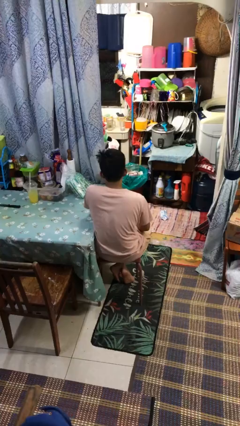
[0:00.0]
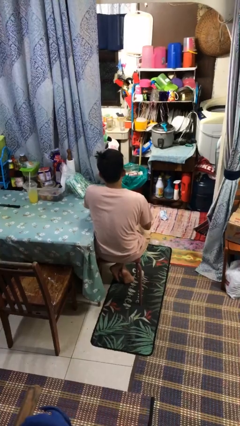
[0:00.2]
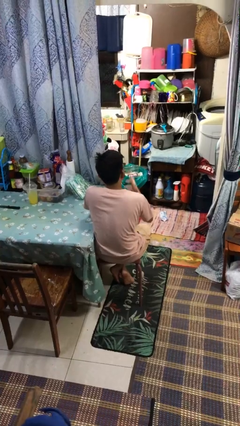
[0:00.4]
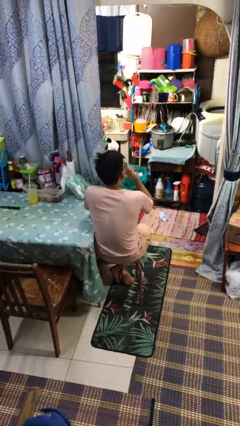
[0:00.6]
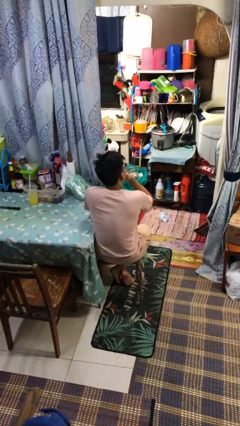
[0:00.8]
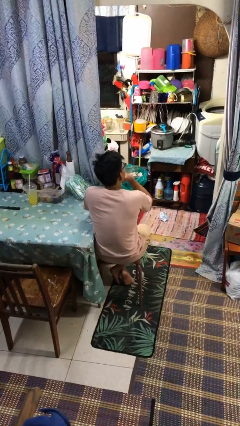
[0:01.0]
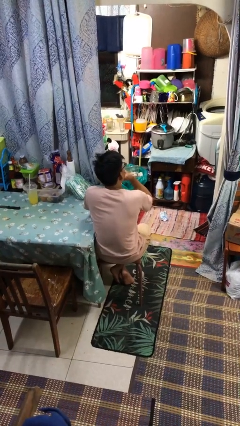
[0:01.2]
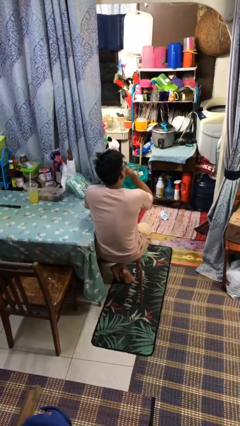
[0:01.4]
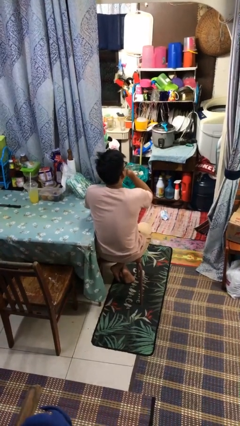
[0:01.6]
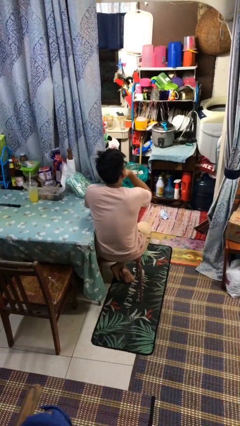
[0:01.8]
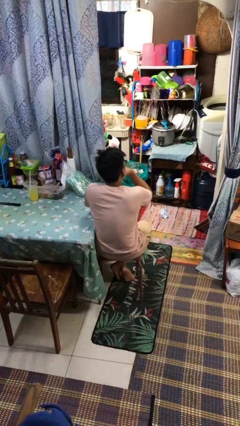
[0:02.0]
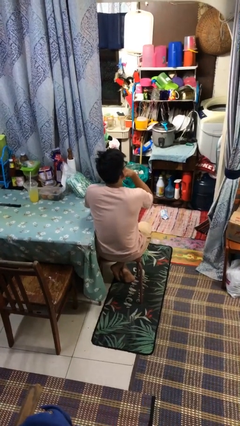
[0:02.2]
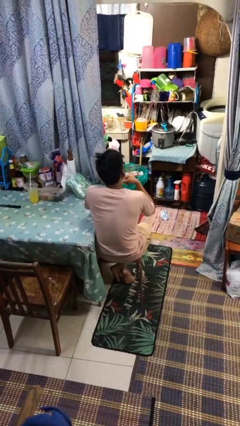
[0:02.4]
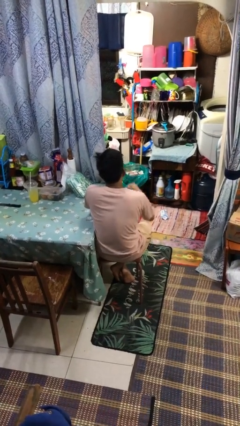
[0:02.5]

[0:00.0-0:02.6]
person strokes chin

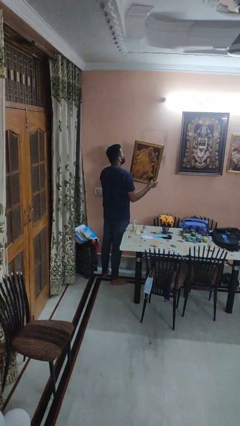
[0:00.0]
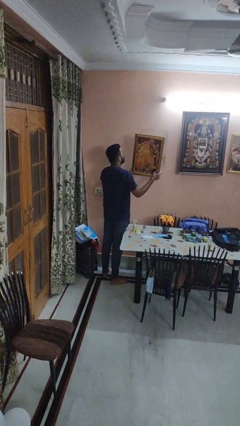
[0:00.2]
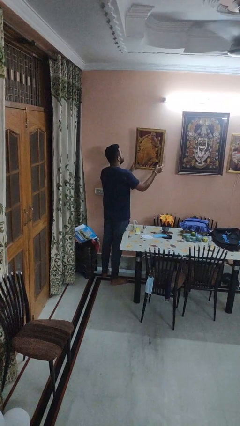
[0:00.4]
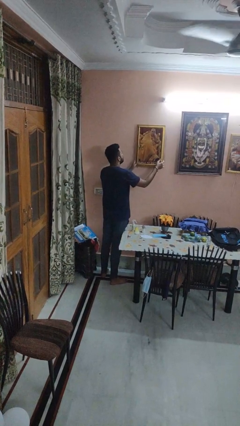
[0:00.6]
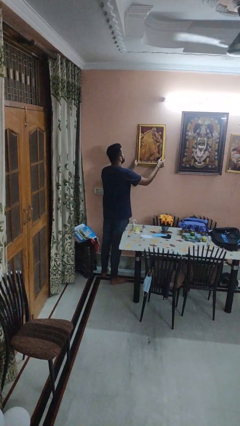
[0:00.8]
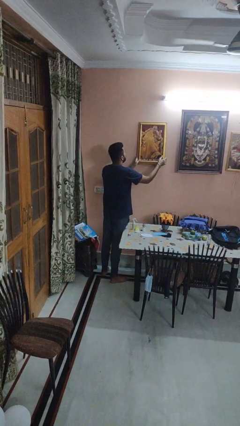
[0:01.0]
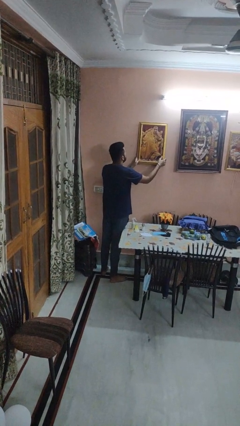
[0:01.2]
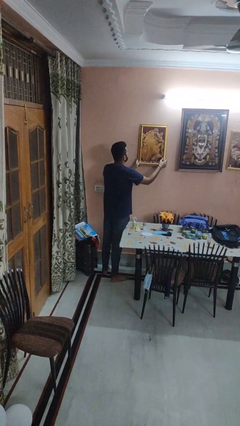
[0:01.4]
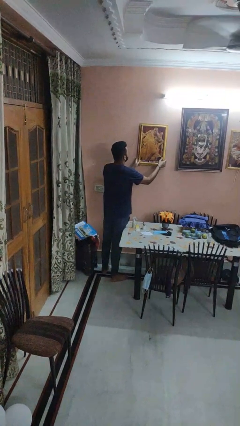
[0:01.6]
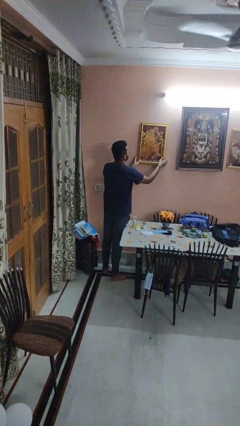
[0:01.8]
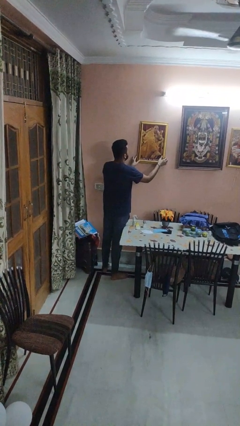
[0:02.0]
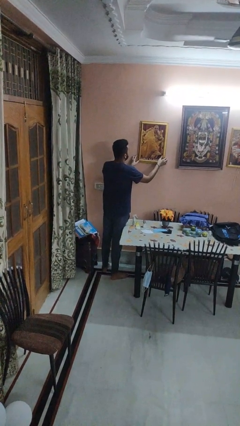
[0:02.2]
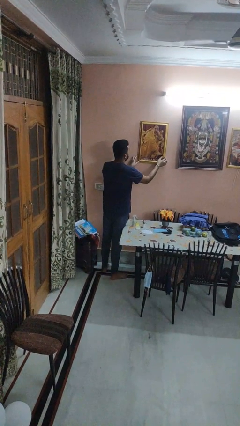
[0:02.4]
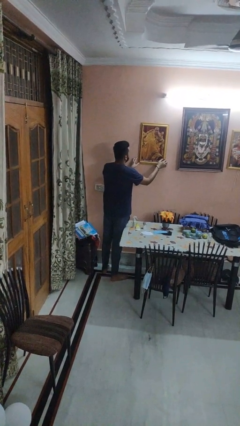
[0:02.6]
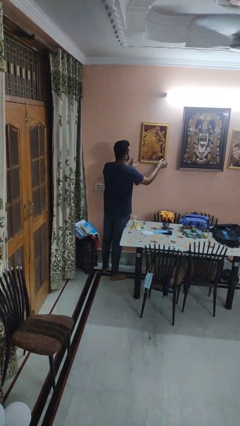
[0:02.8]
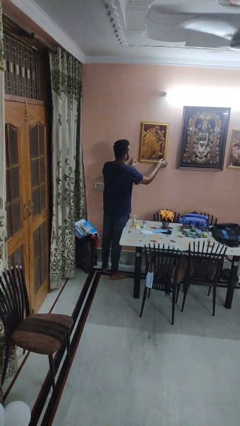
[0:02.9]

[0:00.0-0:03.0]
person puts up picture frame

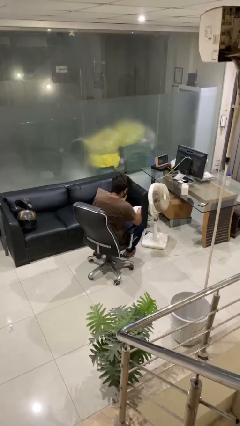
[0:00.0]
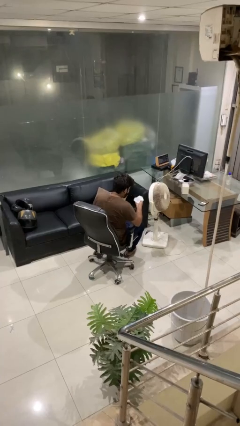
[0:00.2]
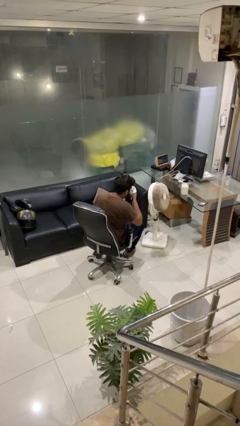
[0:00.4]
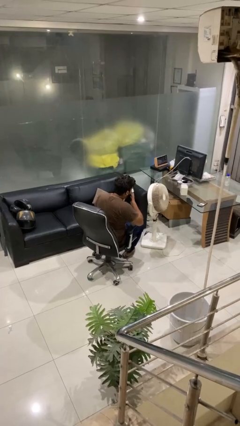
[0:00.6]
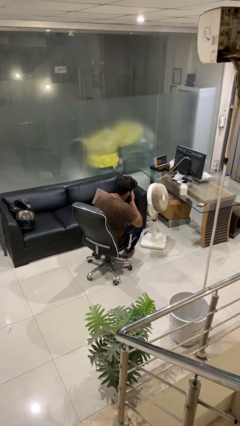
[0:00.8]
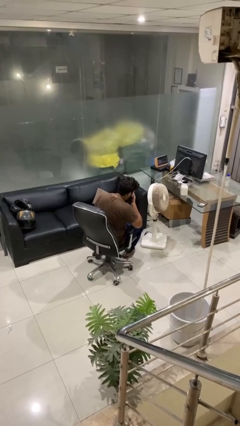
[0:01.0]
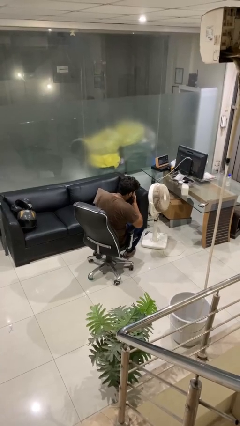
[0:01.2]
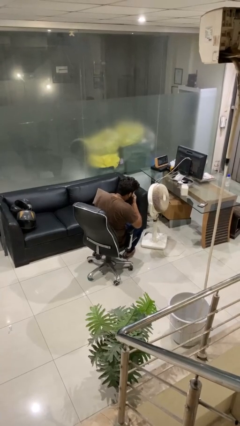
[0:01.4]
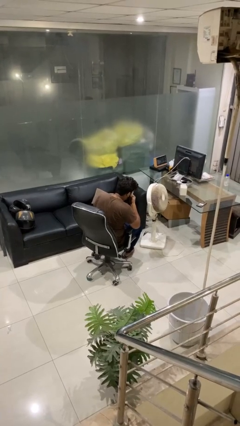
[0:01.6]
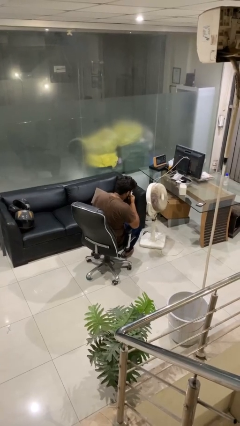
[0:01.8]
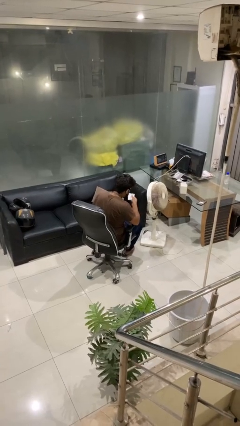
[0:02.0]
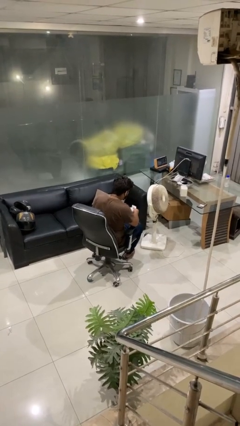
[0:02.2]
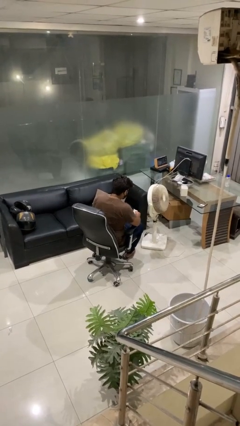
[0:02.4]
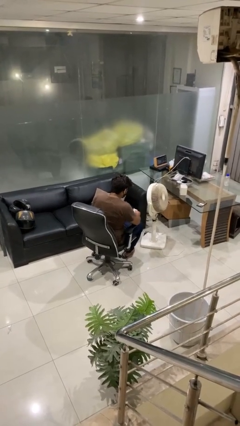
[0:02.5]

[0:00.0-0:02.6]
person blows nose

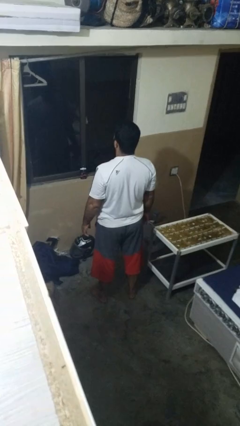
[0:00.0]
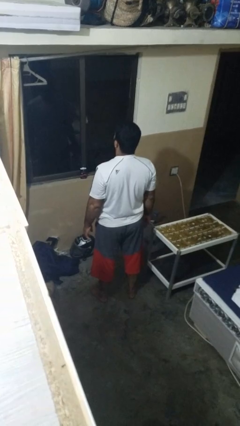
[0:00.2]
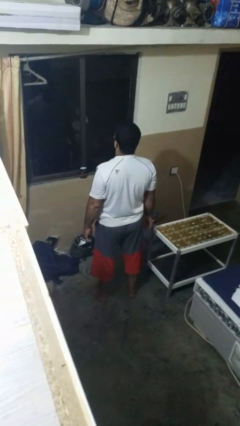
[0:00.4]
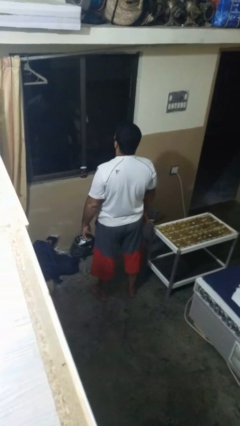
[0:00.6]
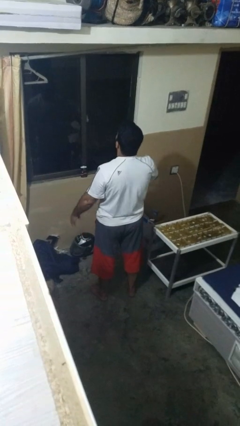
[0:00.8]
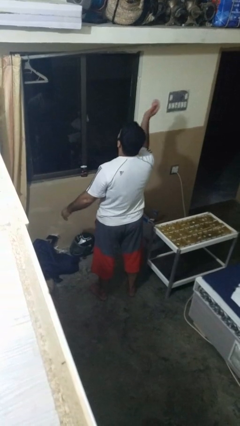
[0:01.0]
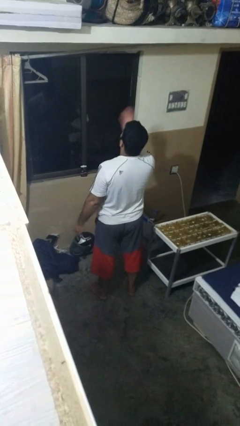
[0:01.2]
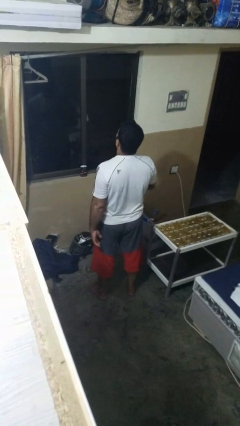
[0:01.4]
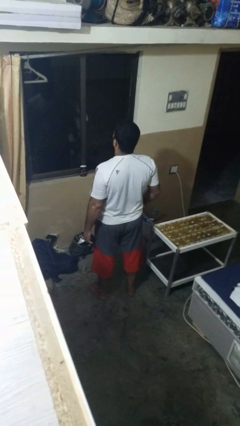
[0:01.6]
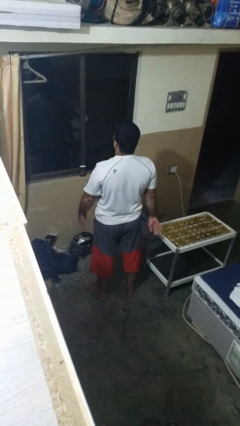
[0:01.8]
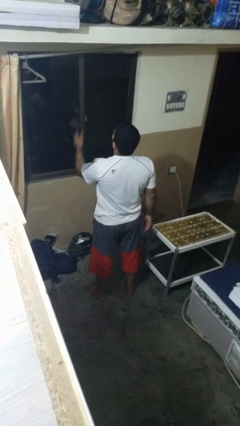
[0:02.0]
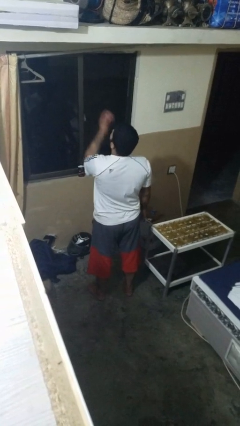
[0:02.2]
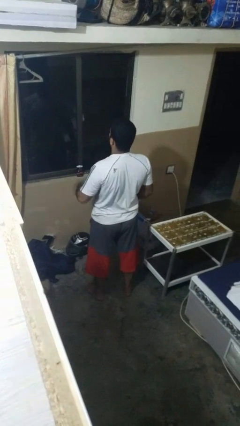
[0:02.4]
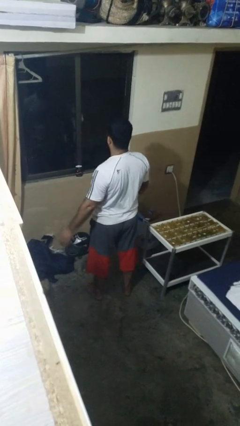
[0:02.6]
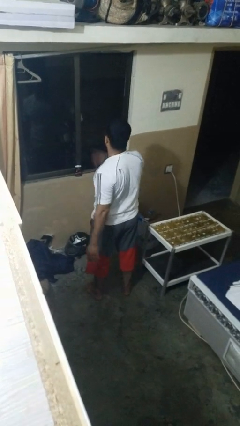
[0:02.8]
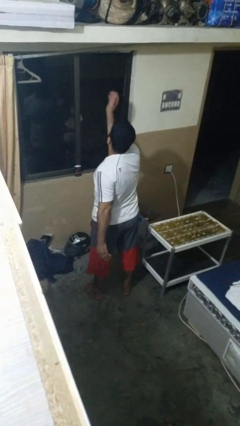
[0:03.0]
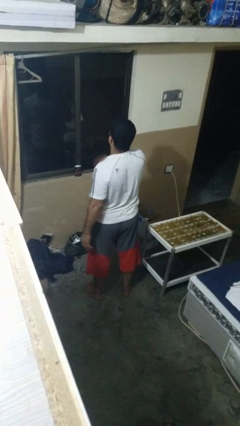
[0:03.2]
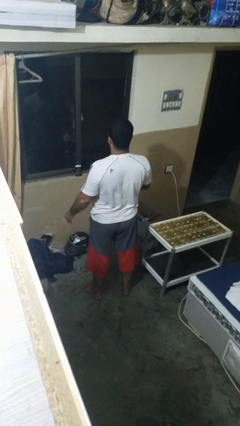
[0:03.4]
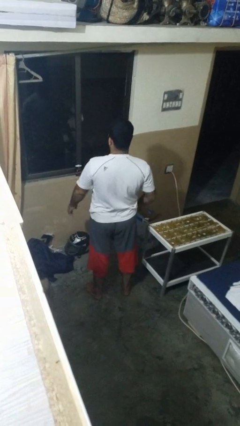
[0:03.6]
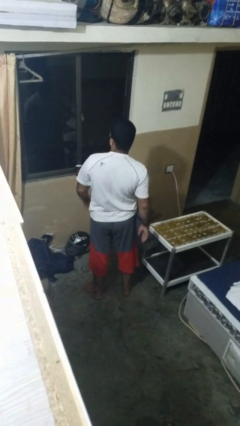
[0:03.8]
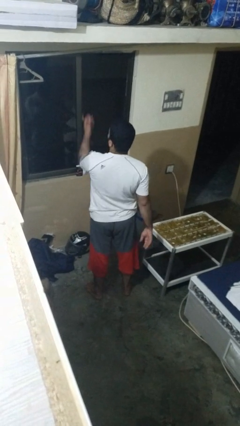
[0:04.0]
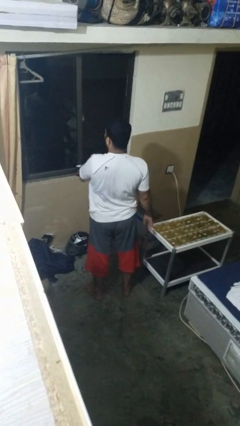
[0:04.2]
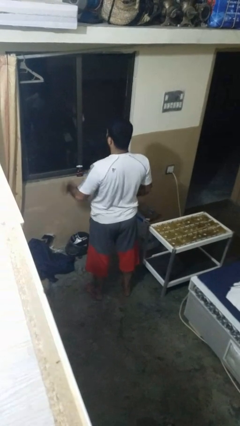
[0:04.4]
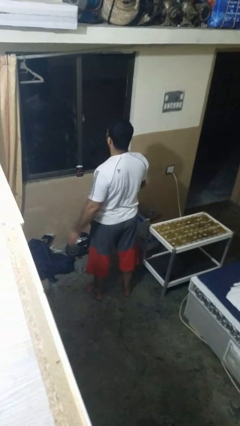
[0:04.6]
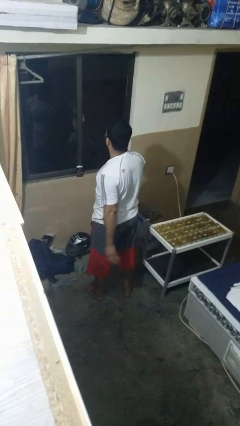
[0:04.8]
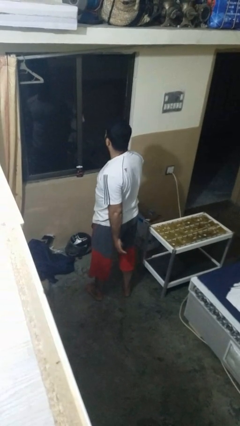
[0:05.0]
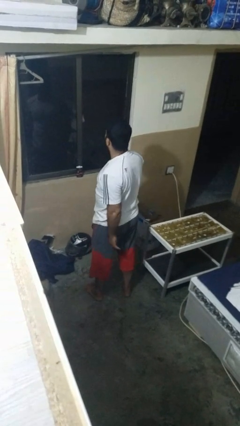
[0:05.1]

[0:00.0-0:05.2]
person drums on chest

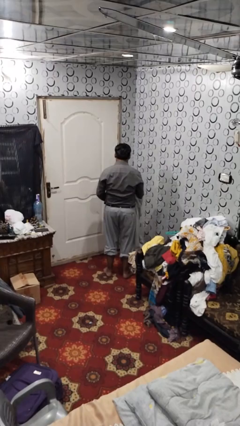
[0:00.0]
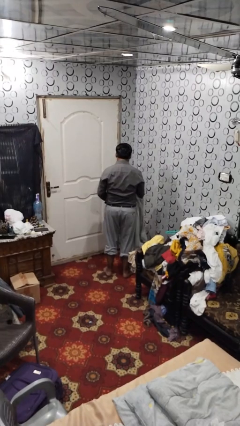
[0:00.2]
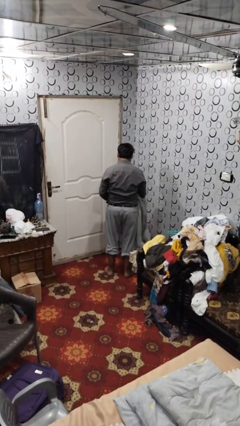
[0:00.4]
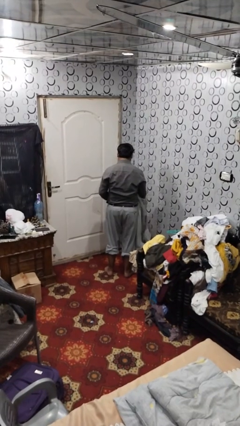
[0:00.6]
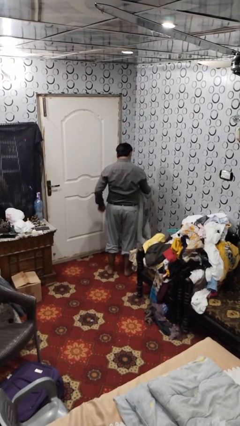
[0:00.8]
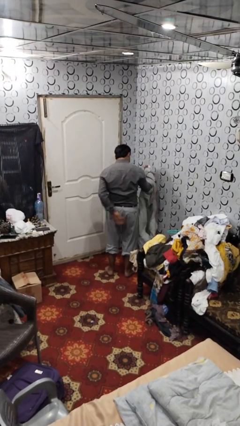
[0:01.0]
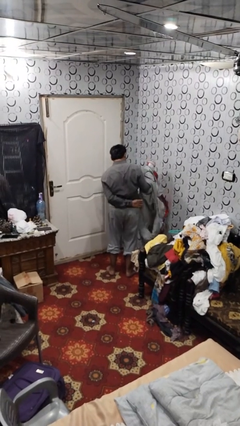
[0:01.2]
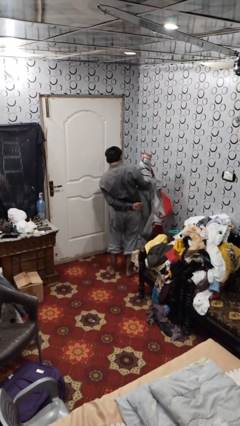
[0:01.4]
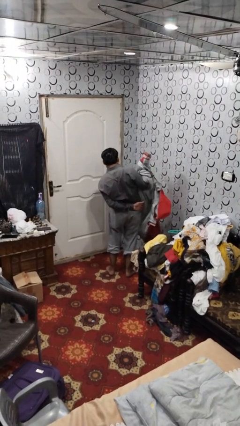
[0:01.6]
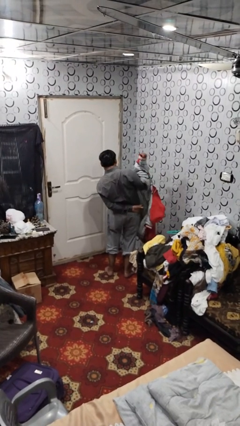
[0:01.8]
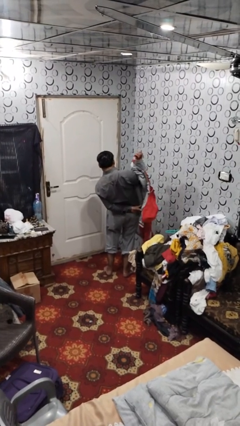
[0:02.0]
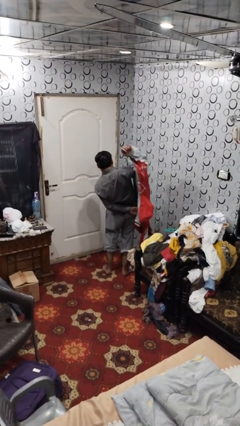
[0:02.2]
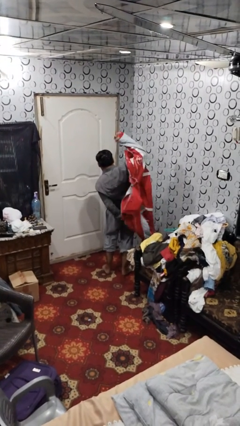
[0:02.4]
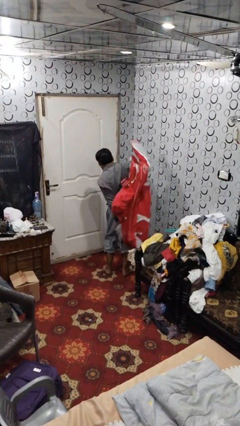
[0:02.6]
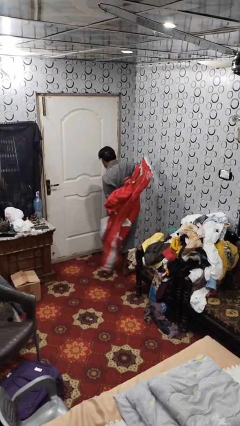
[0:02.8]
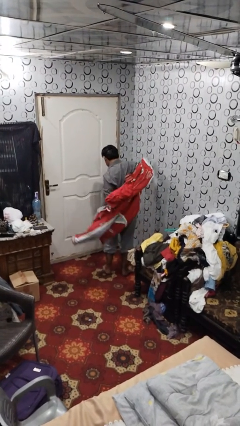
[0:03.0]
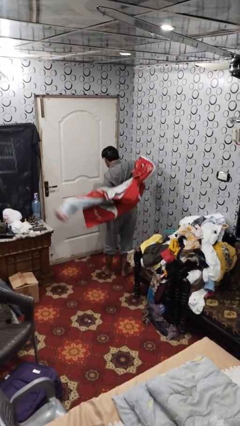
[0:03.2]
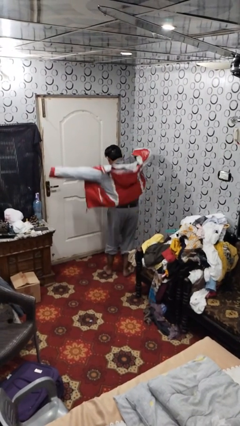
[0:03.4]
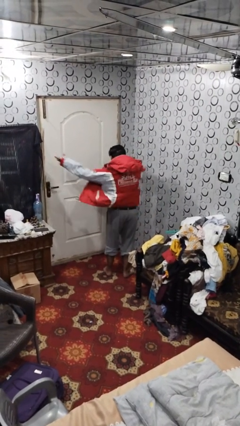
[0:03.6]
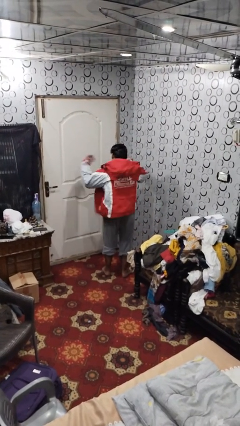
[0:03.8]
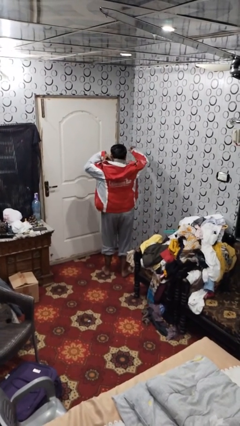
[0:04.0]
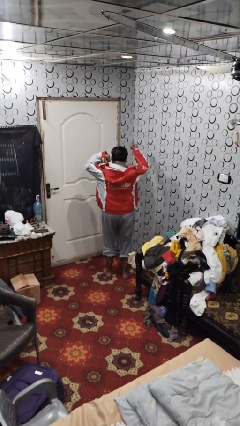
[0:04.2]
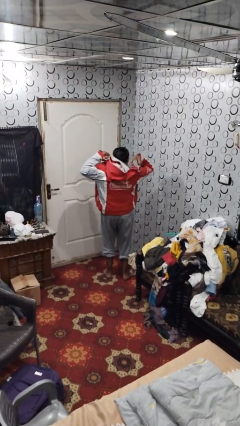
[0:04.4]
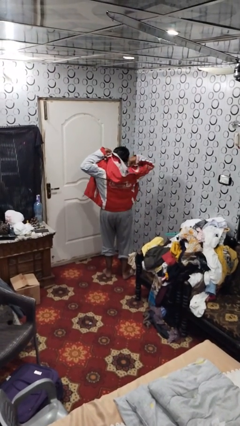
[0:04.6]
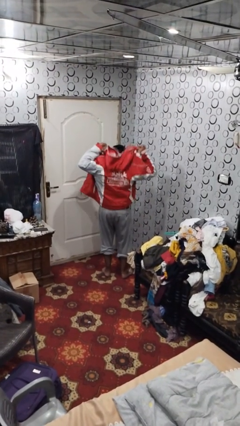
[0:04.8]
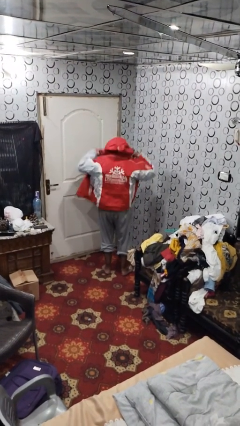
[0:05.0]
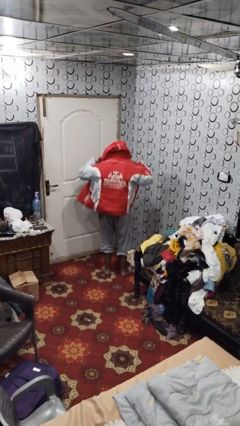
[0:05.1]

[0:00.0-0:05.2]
person puts on hoodie
